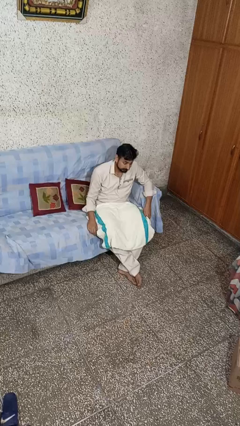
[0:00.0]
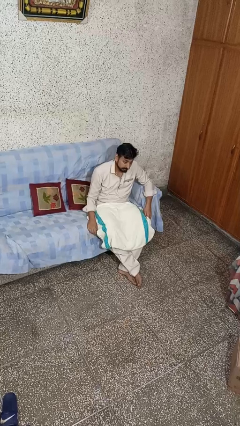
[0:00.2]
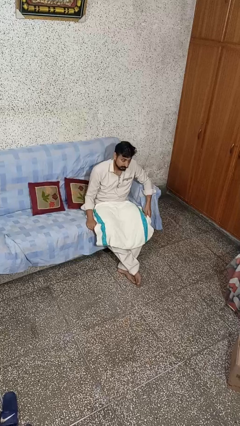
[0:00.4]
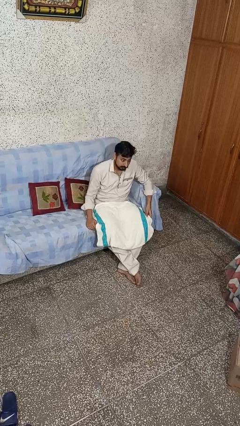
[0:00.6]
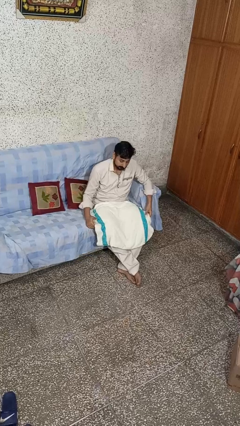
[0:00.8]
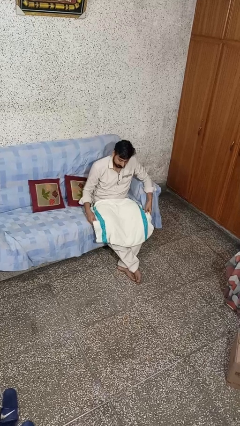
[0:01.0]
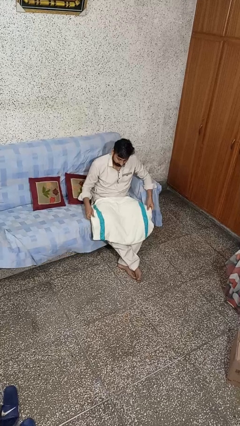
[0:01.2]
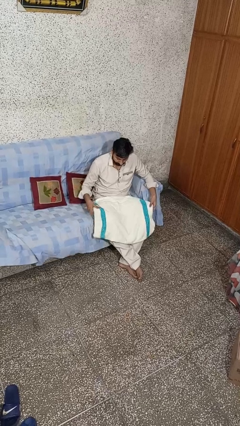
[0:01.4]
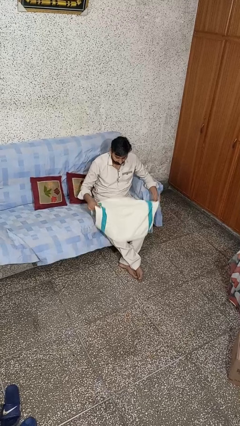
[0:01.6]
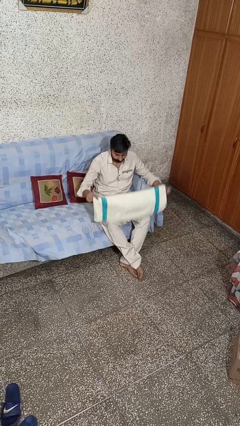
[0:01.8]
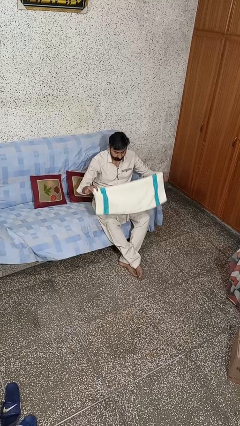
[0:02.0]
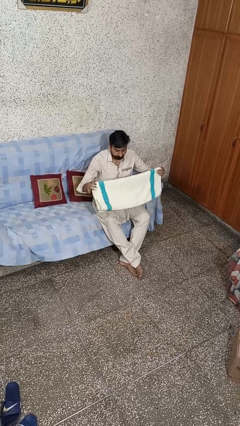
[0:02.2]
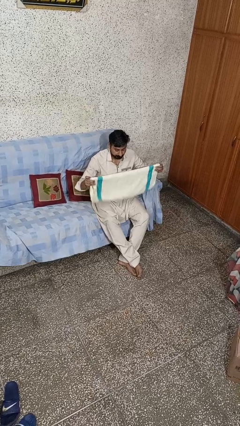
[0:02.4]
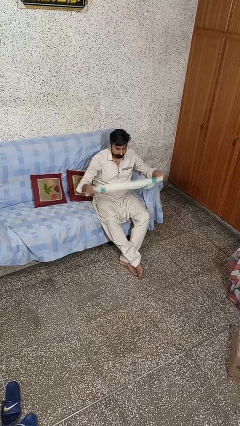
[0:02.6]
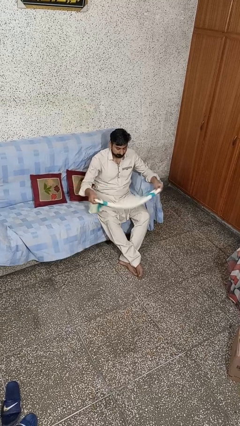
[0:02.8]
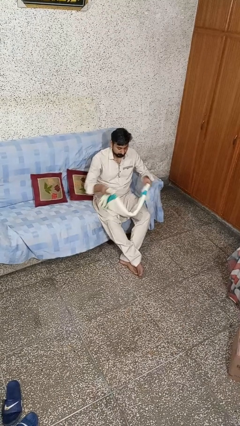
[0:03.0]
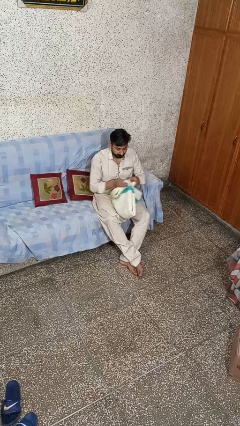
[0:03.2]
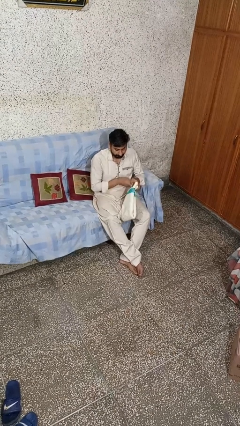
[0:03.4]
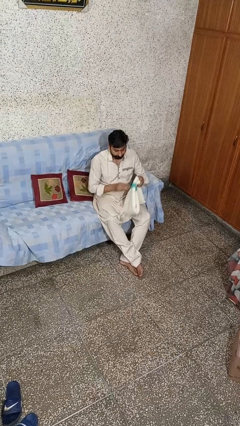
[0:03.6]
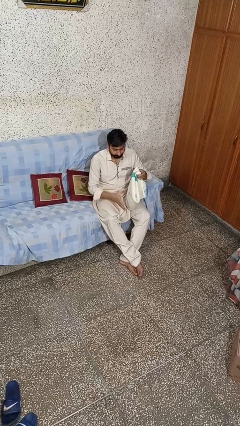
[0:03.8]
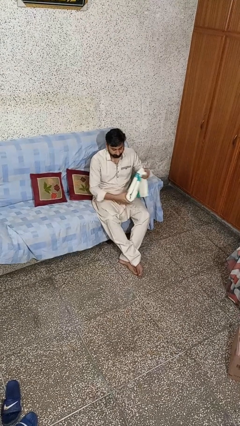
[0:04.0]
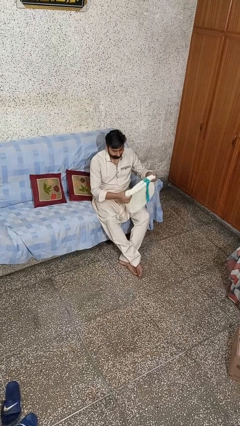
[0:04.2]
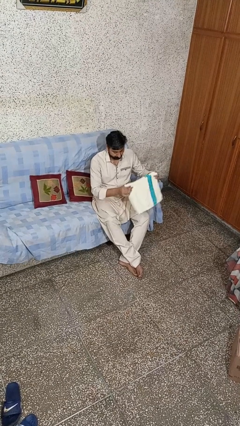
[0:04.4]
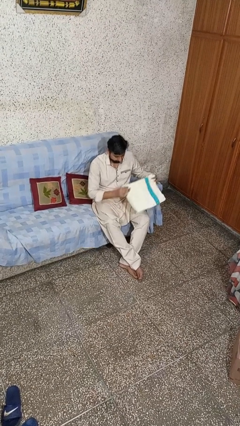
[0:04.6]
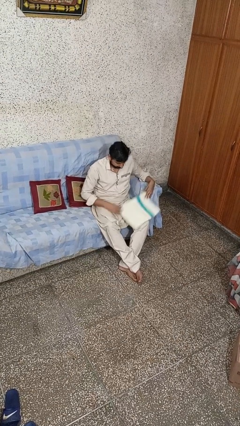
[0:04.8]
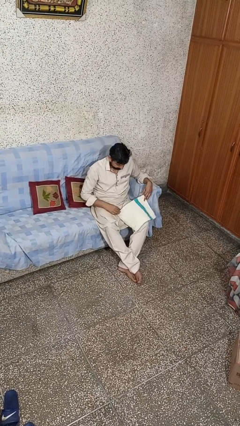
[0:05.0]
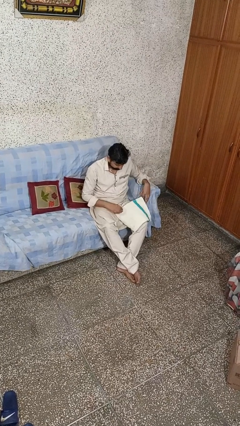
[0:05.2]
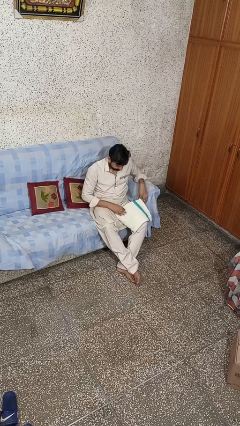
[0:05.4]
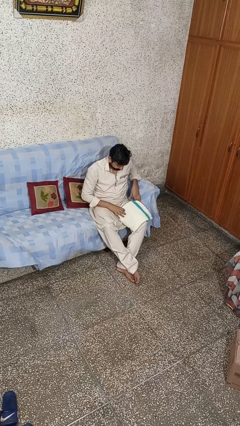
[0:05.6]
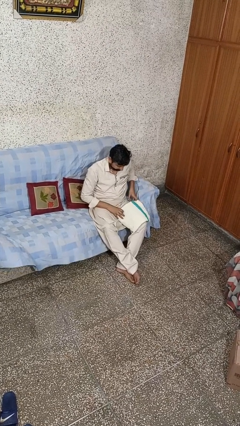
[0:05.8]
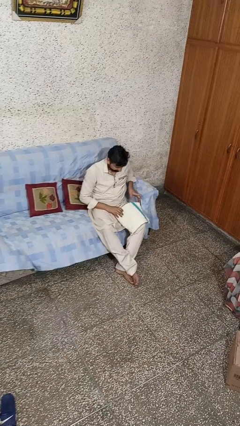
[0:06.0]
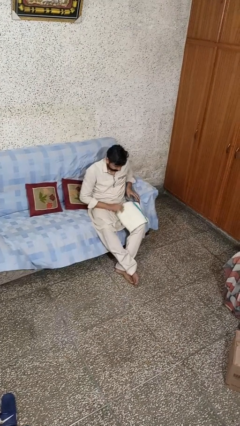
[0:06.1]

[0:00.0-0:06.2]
person folds towel

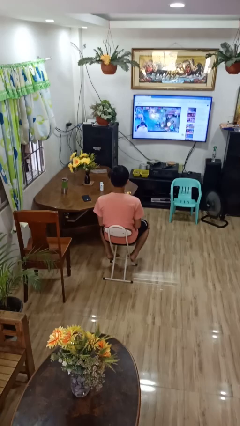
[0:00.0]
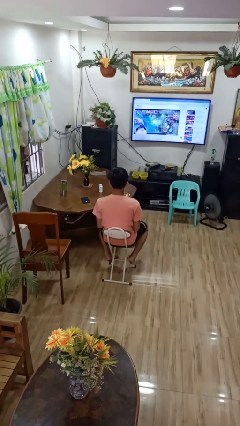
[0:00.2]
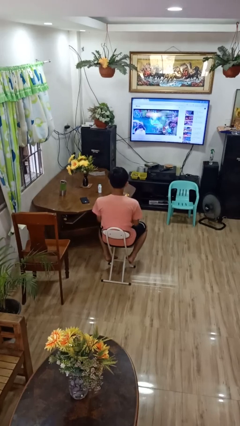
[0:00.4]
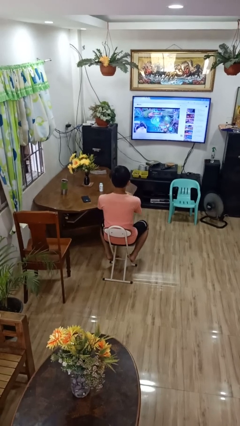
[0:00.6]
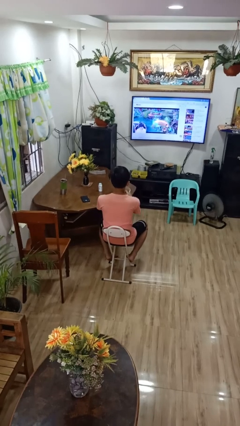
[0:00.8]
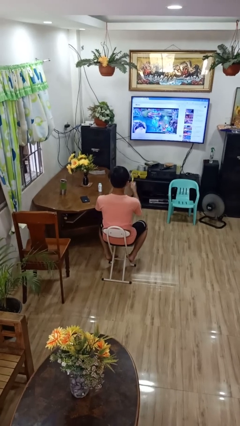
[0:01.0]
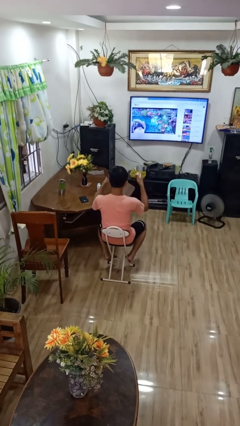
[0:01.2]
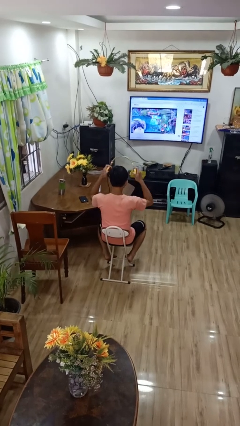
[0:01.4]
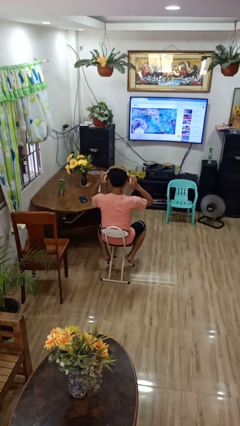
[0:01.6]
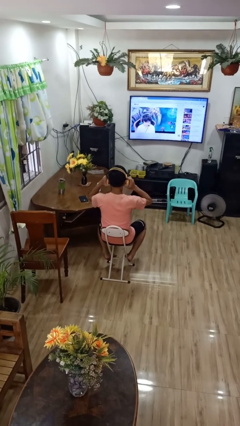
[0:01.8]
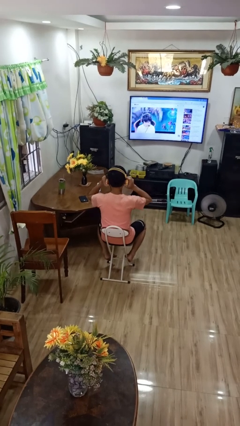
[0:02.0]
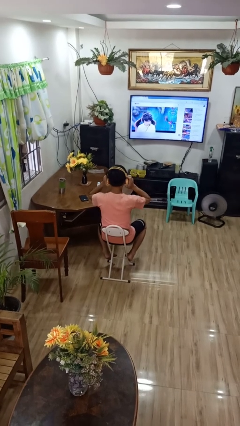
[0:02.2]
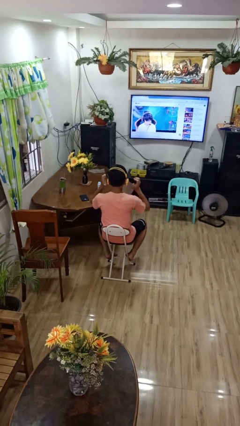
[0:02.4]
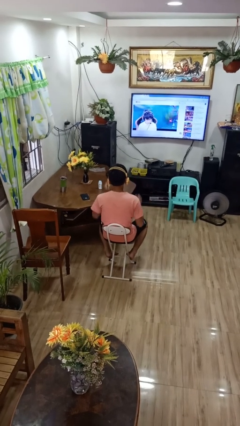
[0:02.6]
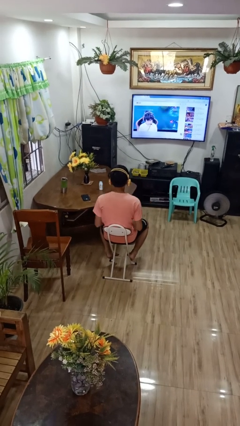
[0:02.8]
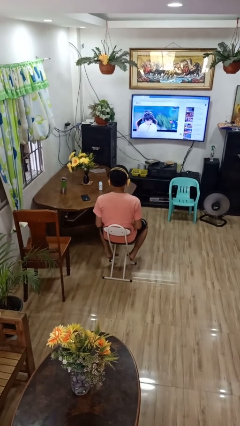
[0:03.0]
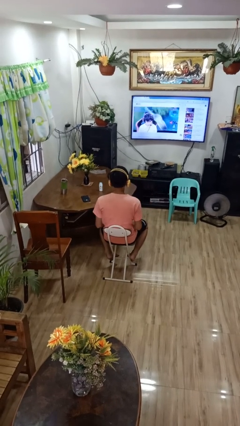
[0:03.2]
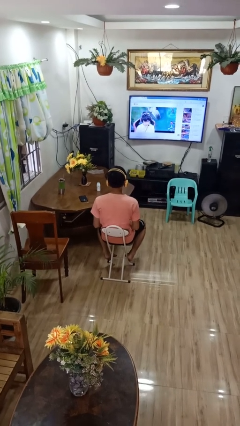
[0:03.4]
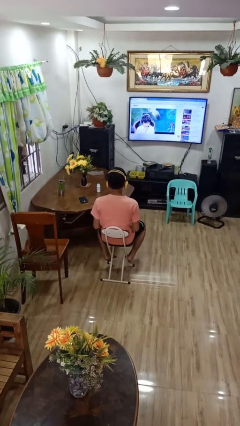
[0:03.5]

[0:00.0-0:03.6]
person puts on headphones

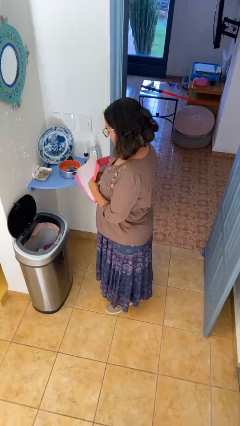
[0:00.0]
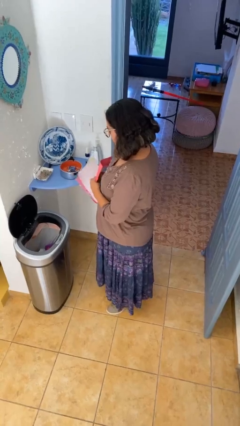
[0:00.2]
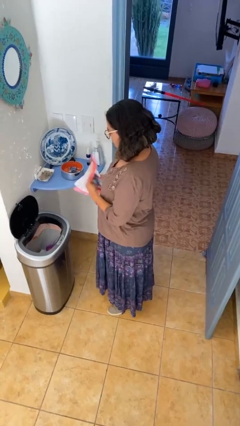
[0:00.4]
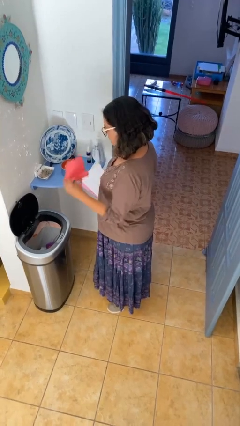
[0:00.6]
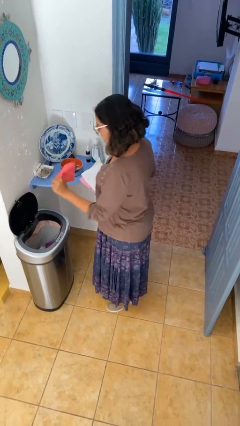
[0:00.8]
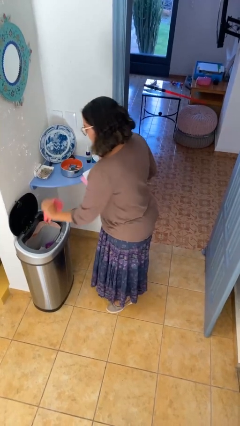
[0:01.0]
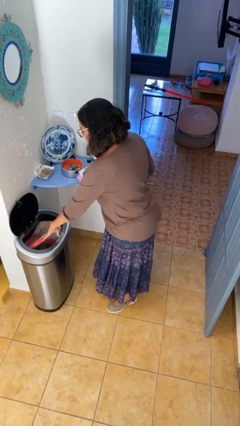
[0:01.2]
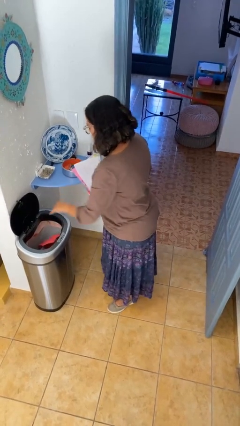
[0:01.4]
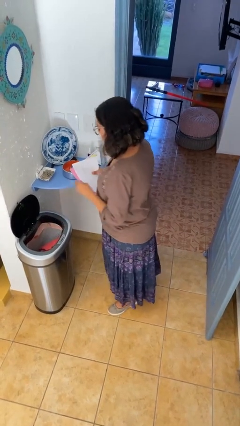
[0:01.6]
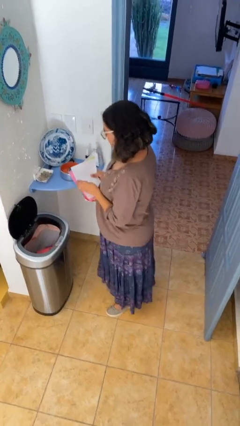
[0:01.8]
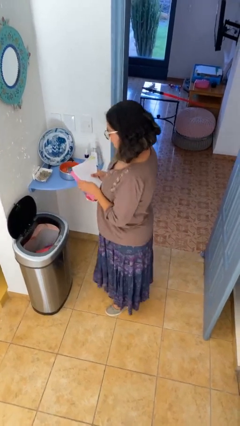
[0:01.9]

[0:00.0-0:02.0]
person discards trash

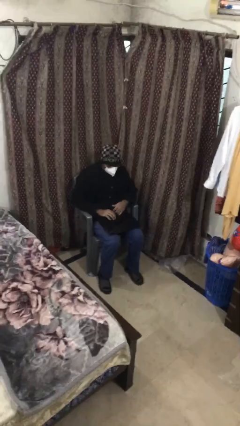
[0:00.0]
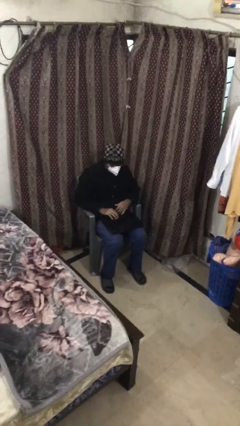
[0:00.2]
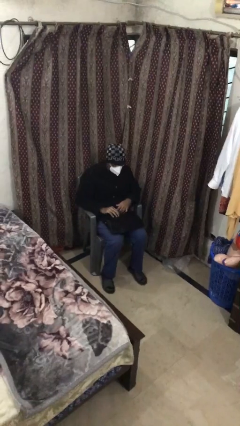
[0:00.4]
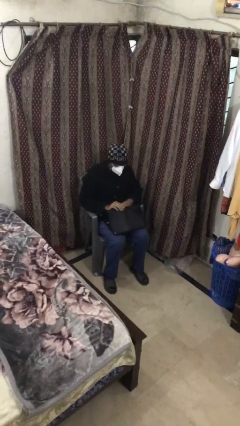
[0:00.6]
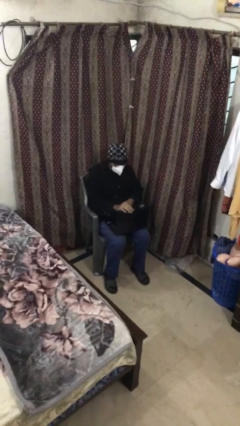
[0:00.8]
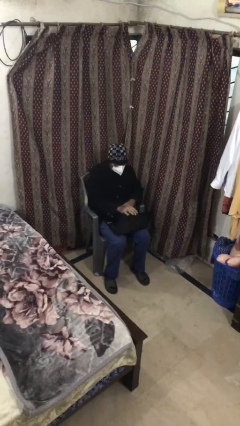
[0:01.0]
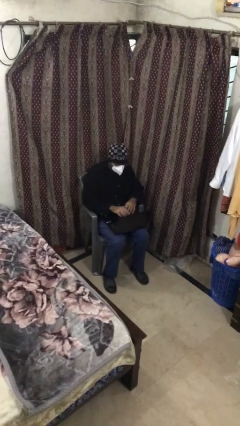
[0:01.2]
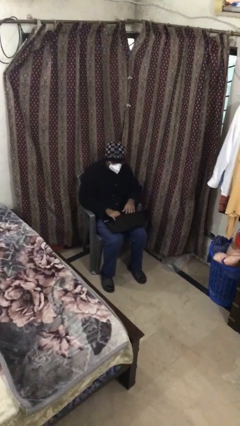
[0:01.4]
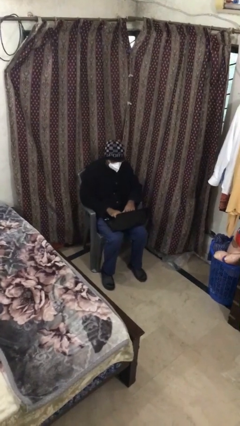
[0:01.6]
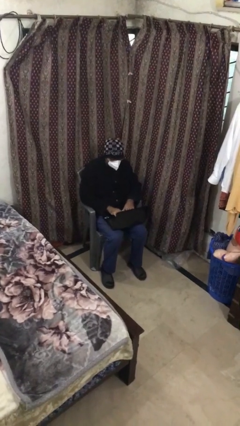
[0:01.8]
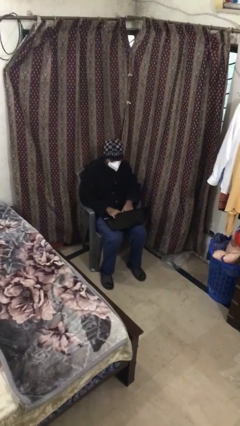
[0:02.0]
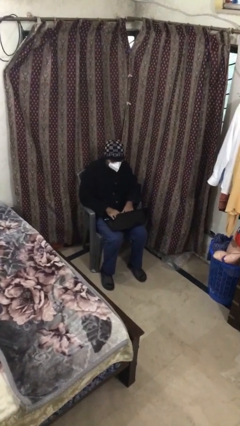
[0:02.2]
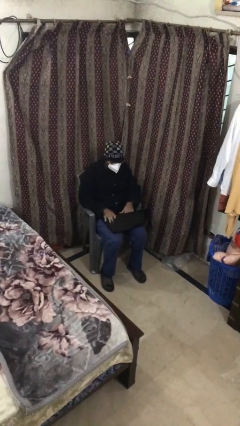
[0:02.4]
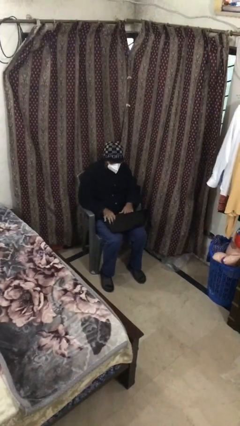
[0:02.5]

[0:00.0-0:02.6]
person interacts with laptop

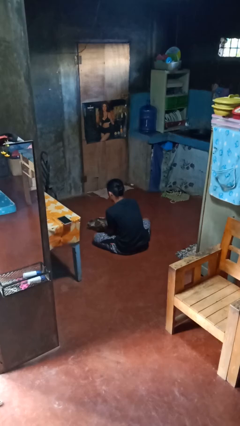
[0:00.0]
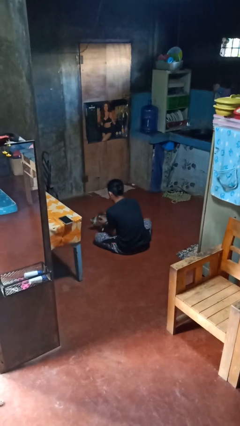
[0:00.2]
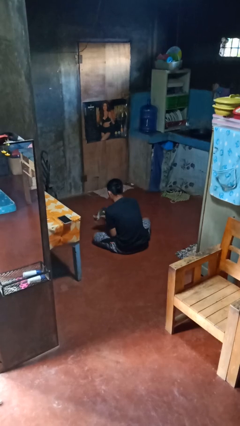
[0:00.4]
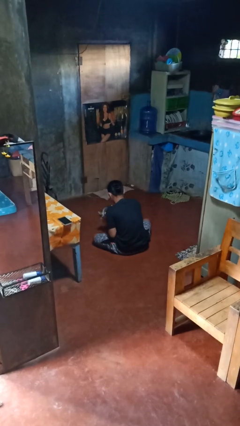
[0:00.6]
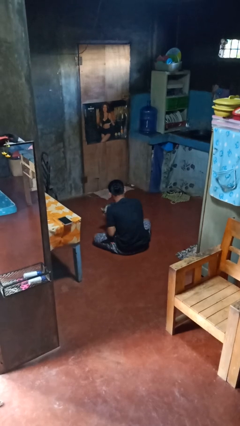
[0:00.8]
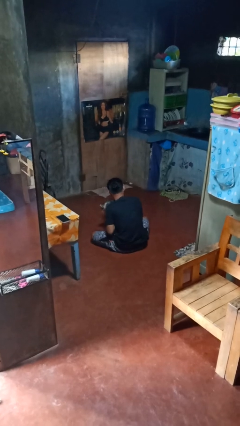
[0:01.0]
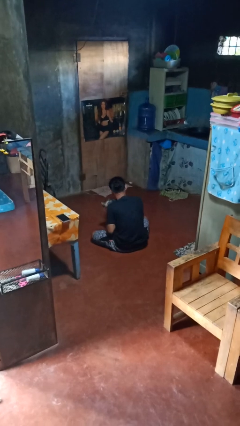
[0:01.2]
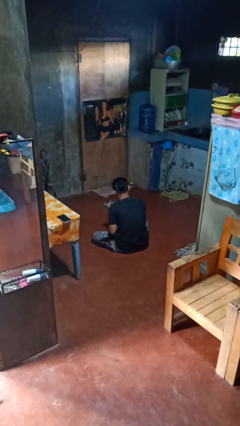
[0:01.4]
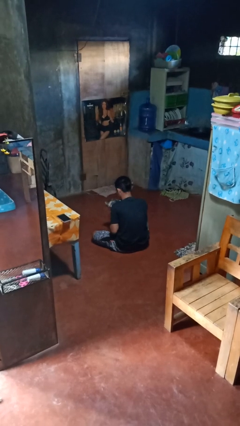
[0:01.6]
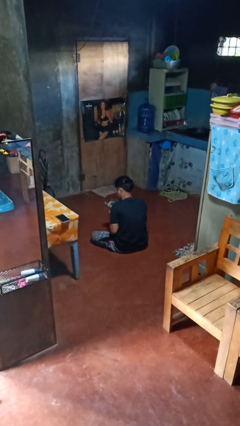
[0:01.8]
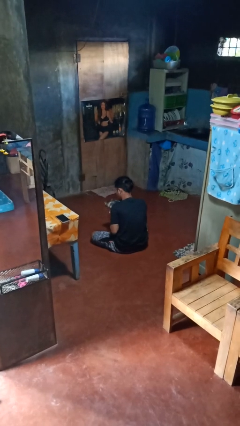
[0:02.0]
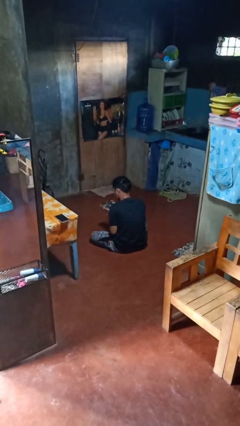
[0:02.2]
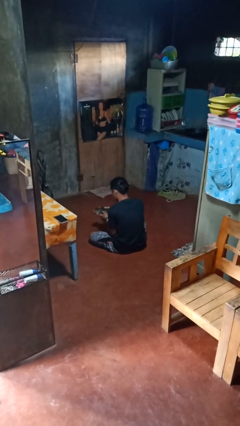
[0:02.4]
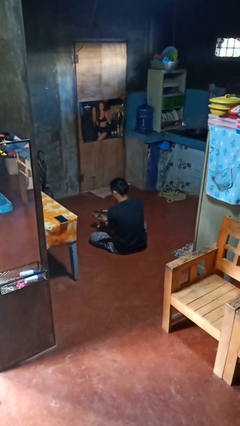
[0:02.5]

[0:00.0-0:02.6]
person hugs cat

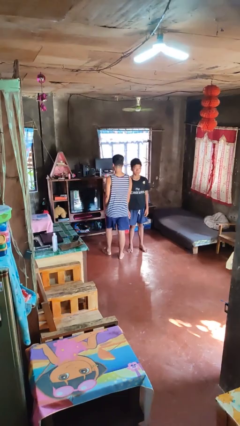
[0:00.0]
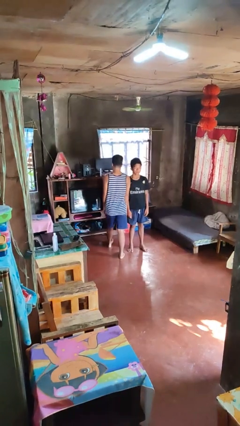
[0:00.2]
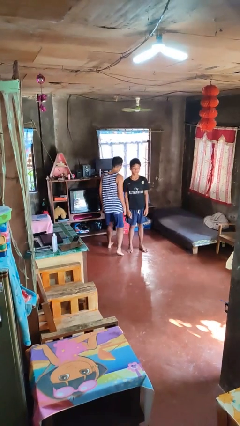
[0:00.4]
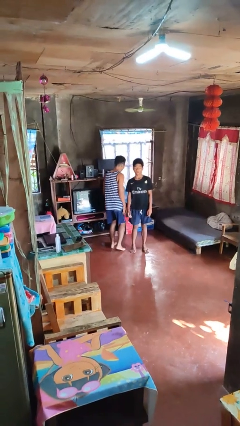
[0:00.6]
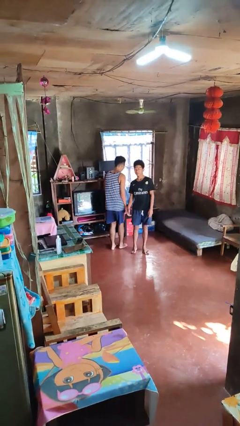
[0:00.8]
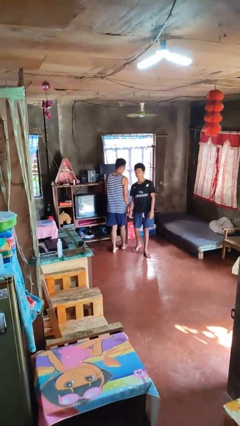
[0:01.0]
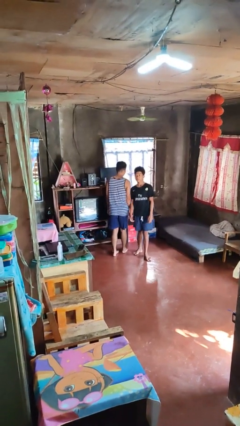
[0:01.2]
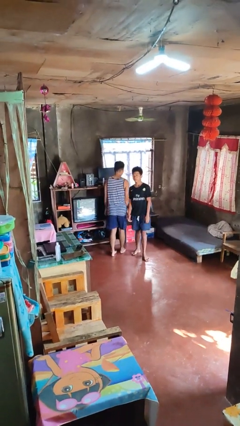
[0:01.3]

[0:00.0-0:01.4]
person bumps into person
